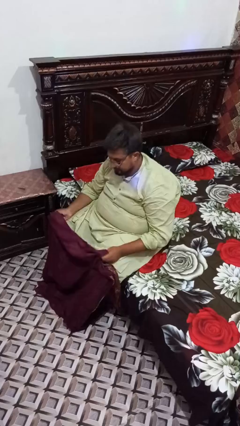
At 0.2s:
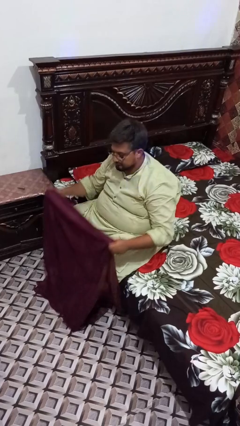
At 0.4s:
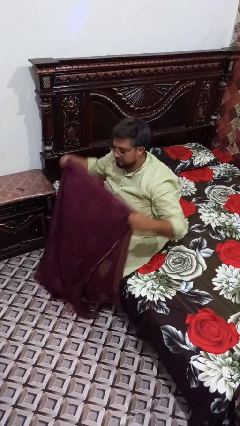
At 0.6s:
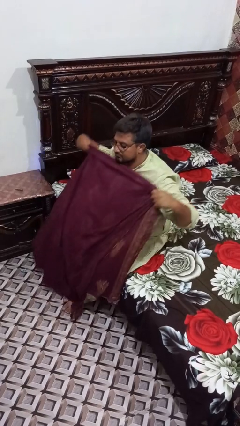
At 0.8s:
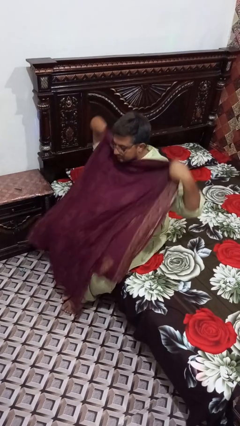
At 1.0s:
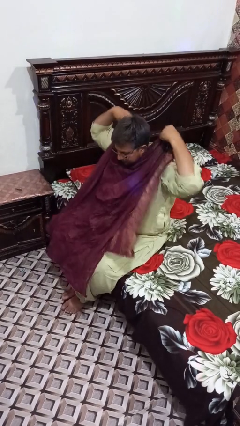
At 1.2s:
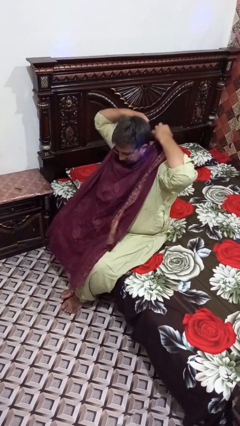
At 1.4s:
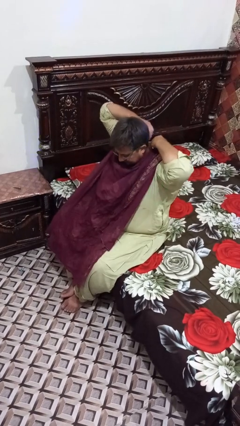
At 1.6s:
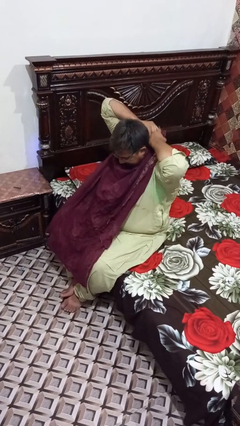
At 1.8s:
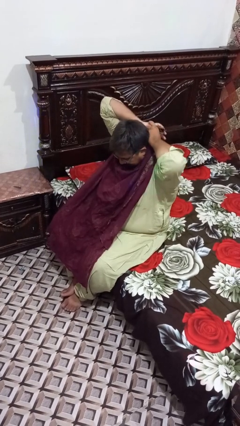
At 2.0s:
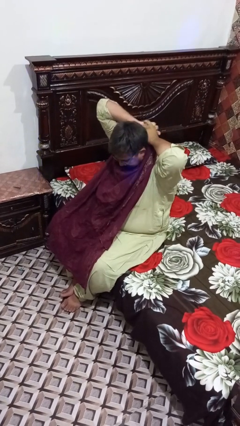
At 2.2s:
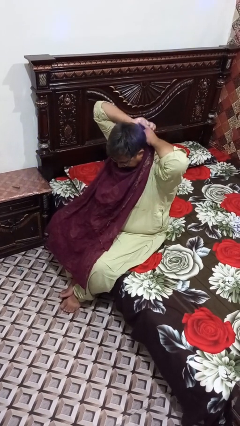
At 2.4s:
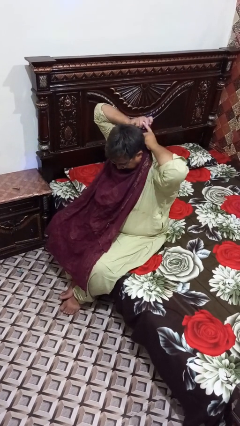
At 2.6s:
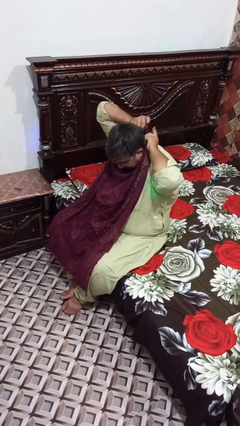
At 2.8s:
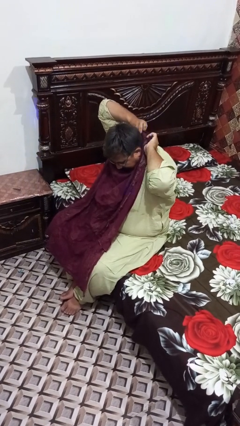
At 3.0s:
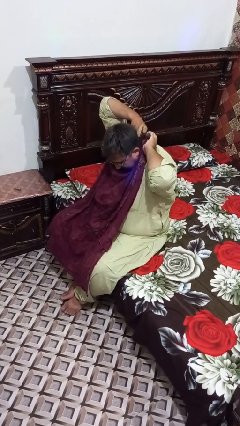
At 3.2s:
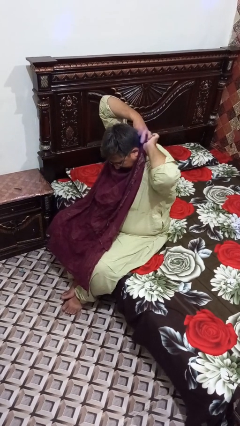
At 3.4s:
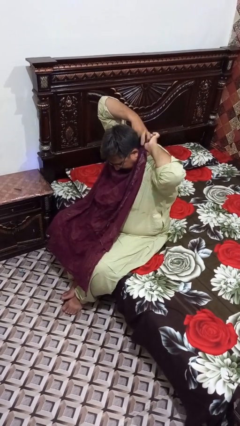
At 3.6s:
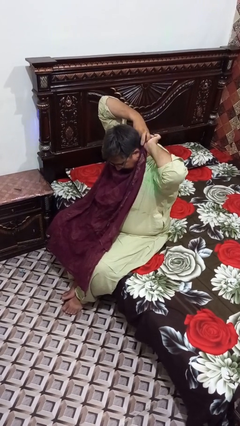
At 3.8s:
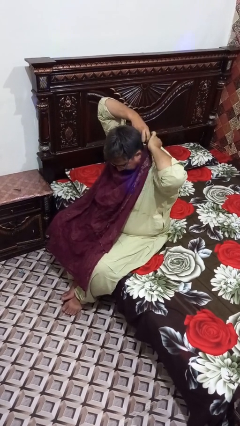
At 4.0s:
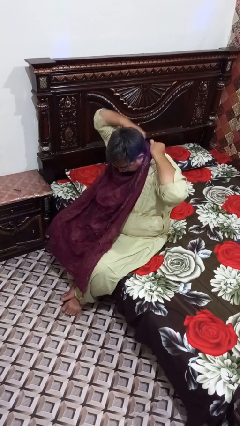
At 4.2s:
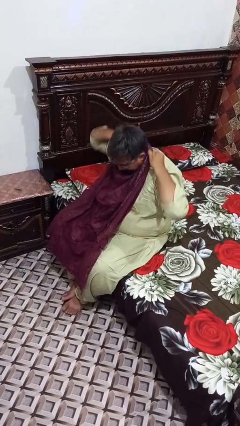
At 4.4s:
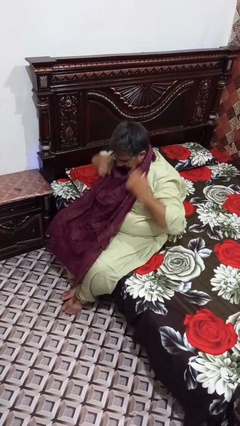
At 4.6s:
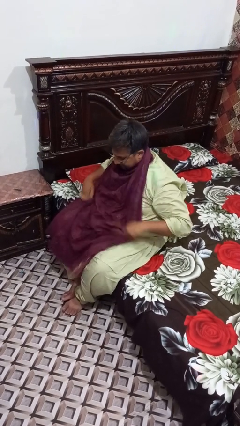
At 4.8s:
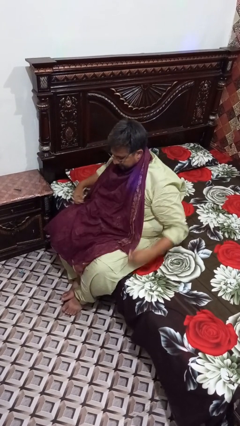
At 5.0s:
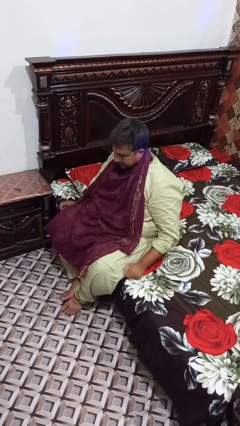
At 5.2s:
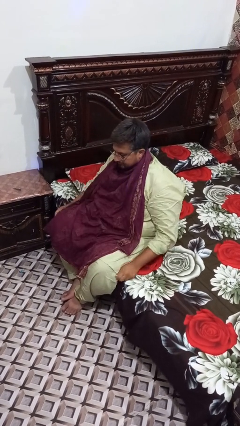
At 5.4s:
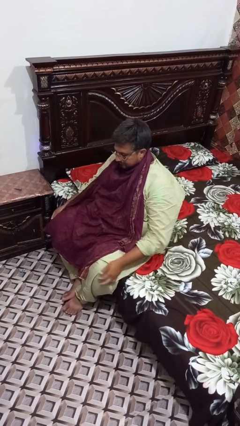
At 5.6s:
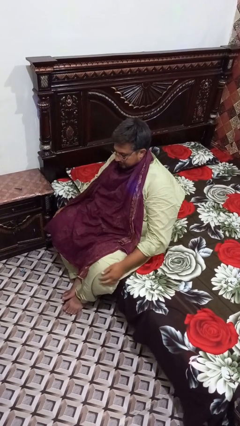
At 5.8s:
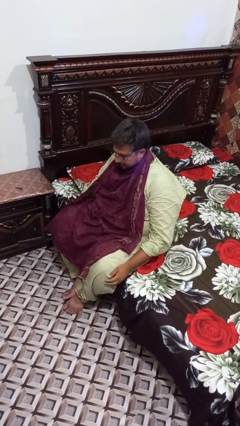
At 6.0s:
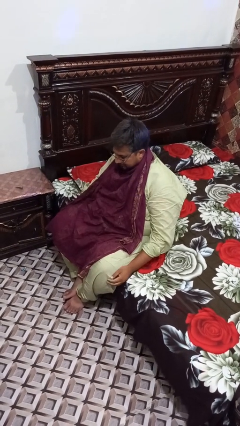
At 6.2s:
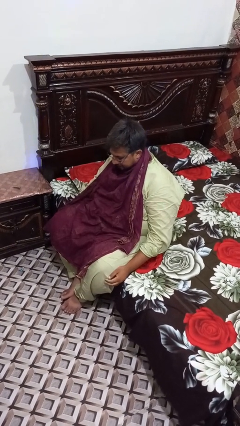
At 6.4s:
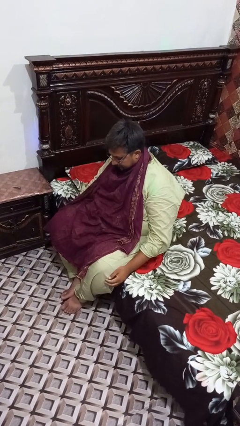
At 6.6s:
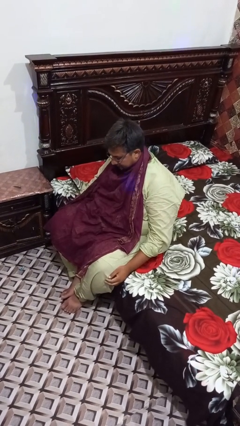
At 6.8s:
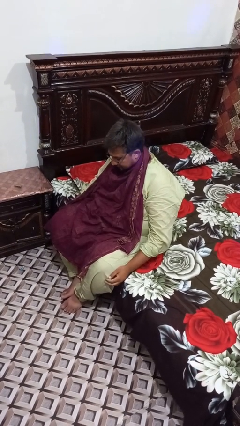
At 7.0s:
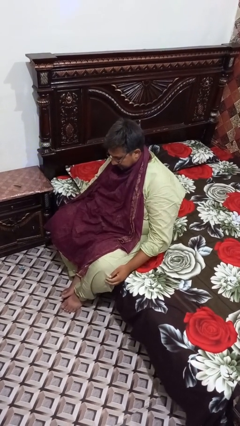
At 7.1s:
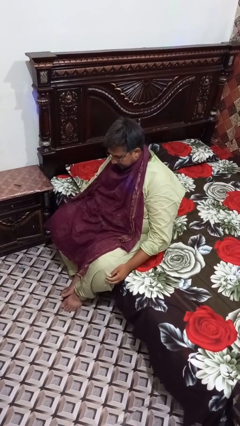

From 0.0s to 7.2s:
person puts on apron

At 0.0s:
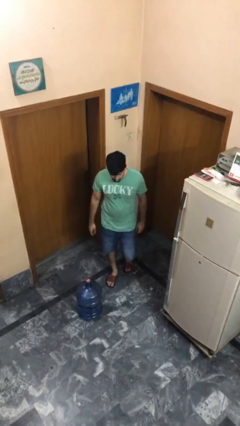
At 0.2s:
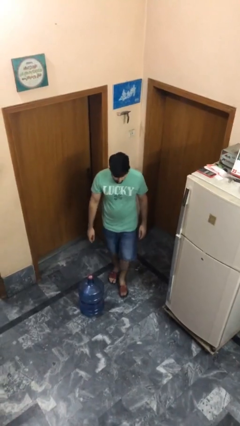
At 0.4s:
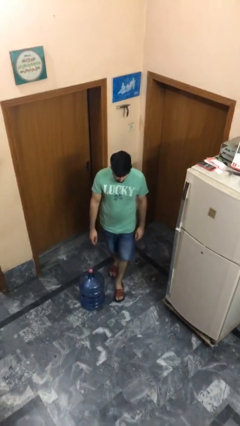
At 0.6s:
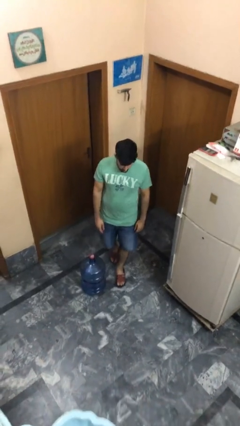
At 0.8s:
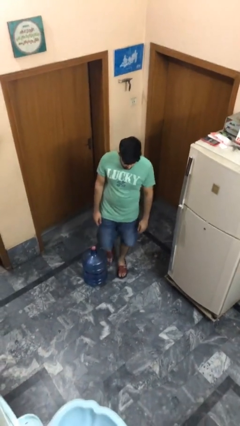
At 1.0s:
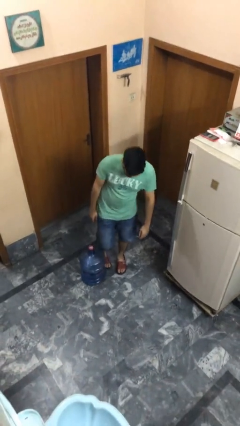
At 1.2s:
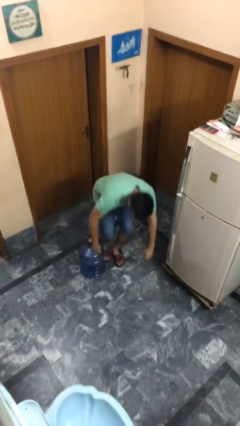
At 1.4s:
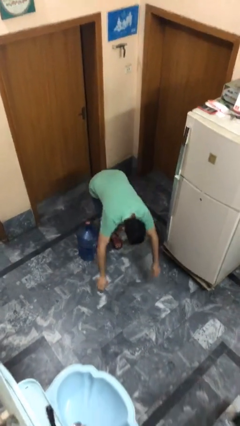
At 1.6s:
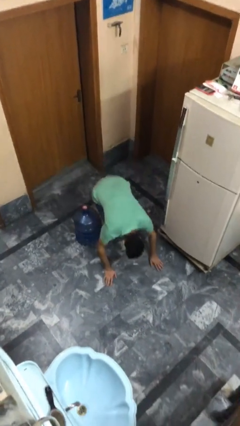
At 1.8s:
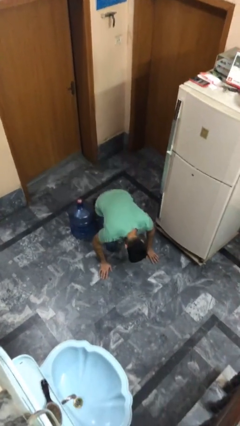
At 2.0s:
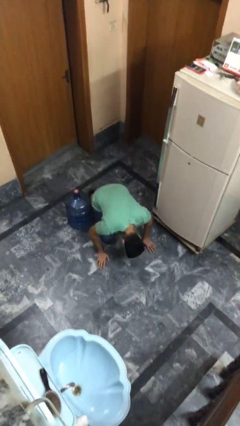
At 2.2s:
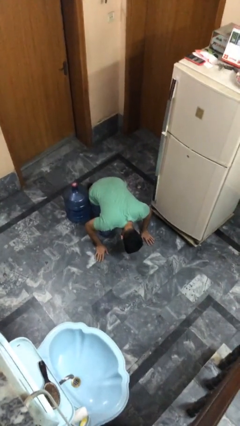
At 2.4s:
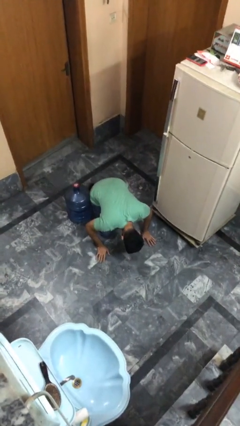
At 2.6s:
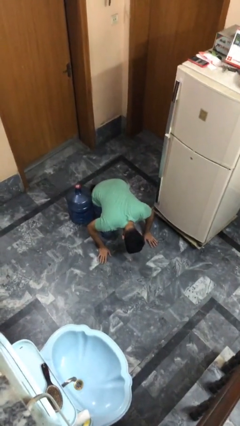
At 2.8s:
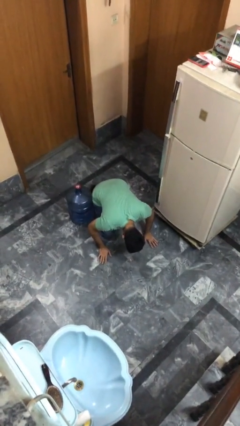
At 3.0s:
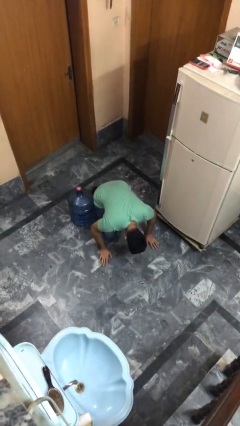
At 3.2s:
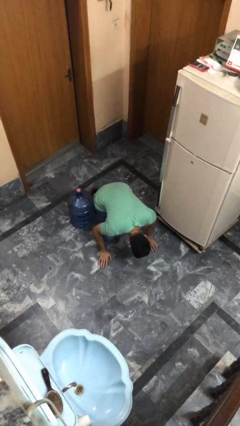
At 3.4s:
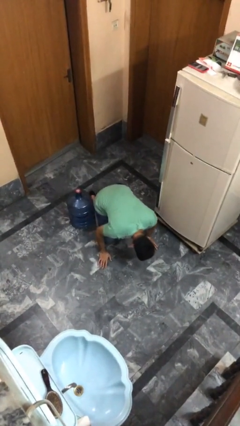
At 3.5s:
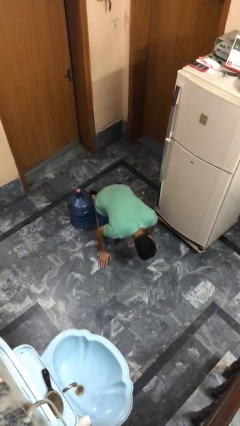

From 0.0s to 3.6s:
person trips on object on floor

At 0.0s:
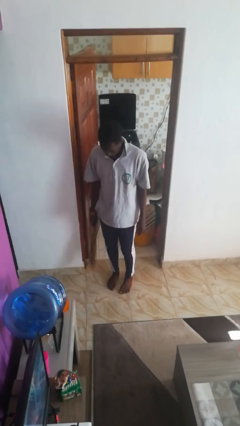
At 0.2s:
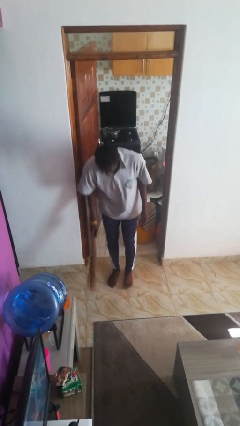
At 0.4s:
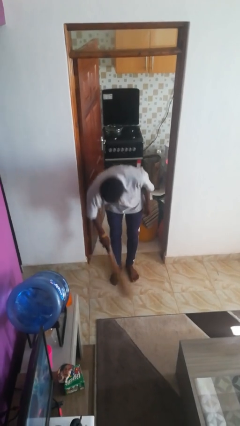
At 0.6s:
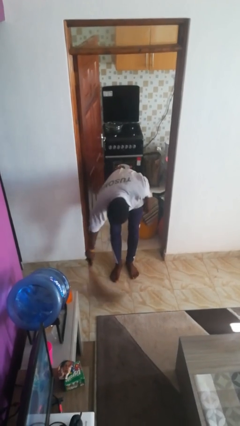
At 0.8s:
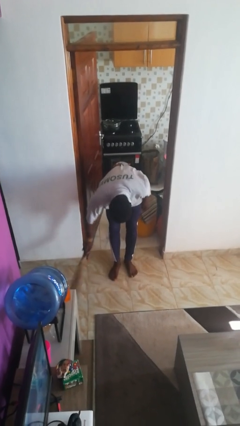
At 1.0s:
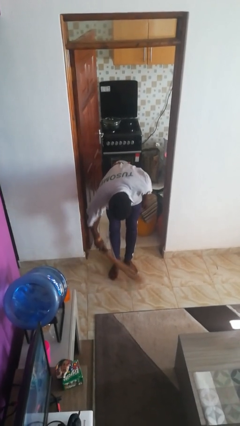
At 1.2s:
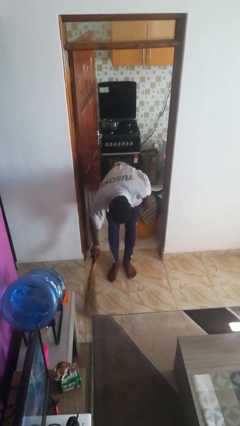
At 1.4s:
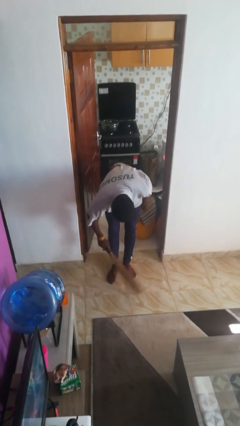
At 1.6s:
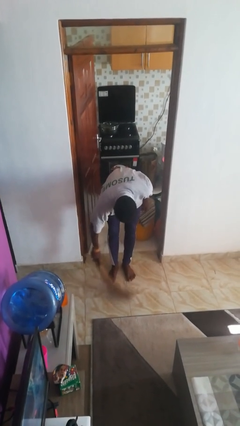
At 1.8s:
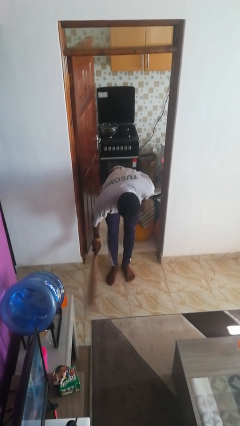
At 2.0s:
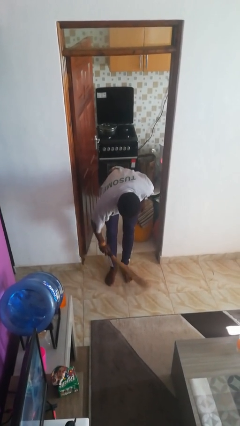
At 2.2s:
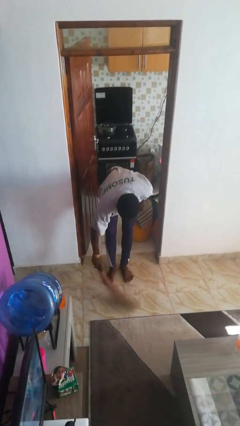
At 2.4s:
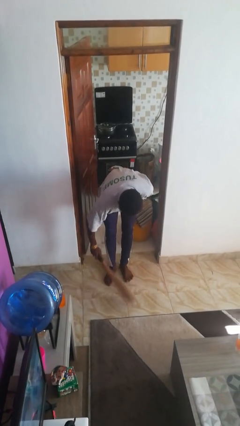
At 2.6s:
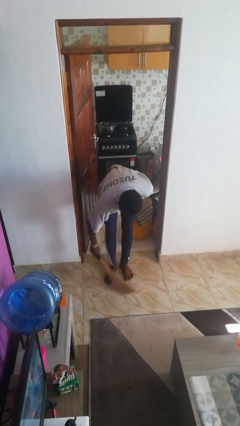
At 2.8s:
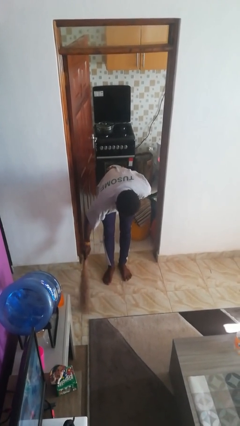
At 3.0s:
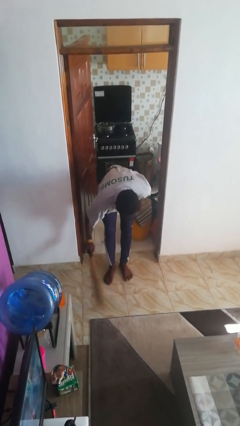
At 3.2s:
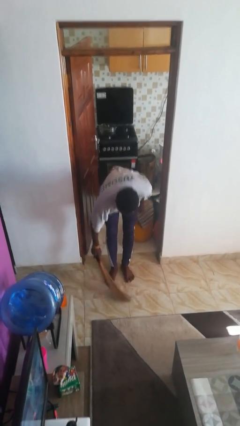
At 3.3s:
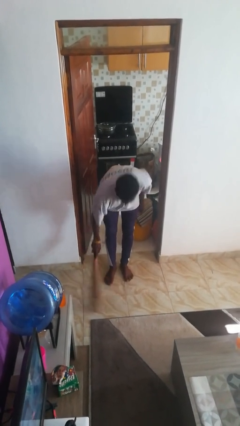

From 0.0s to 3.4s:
person sweeps floor

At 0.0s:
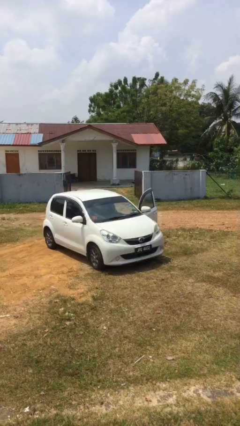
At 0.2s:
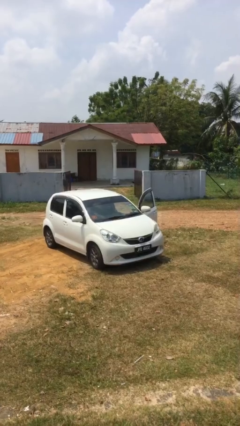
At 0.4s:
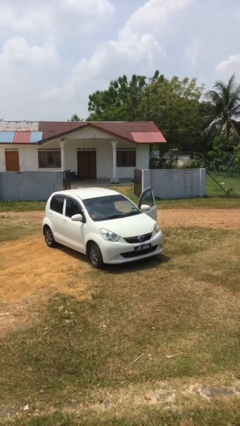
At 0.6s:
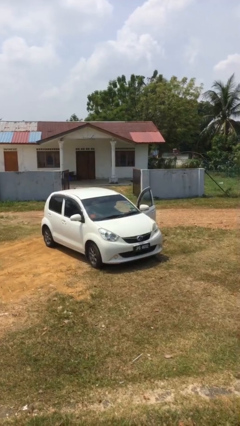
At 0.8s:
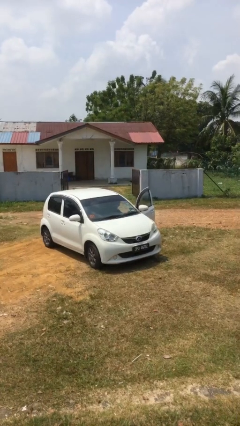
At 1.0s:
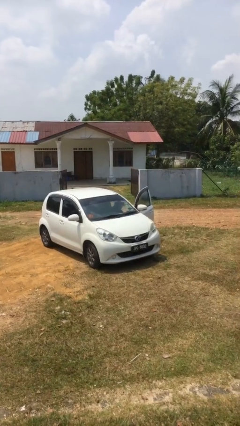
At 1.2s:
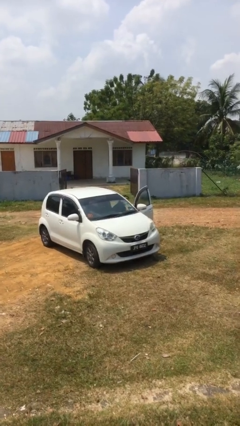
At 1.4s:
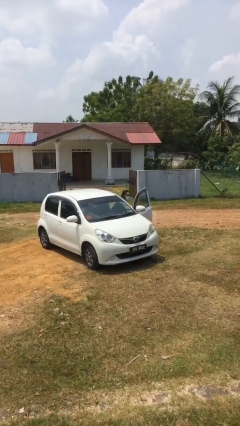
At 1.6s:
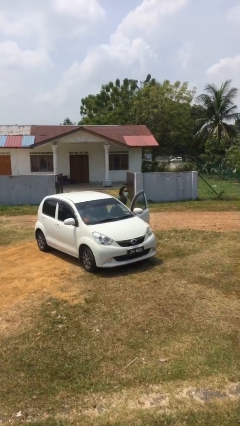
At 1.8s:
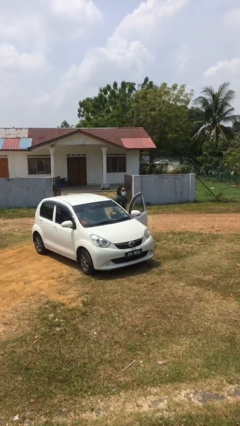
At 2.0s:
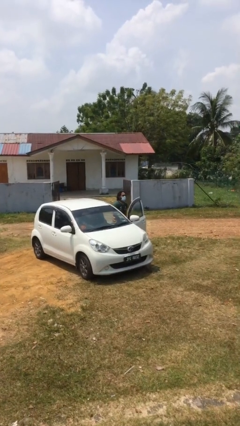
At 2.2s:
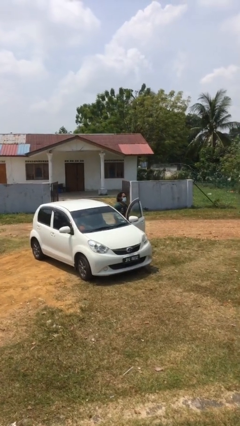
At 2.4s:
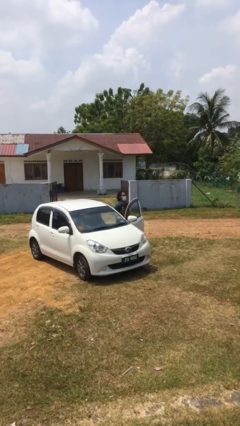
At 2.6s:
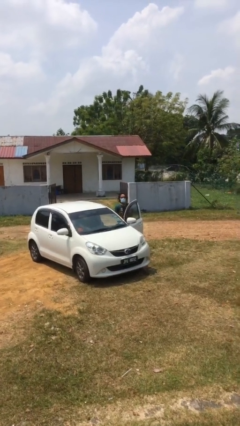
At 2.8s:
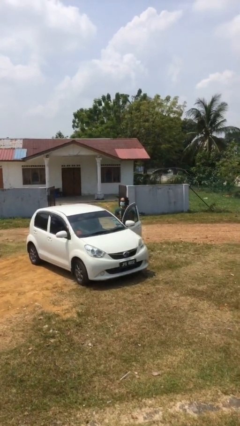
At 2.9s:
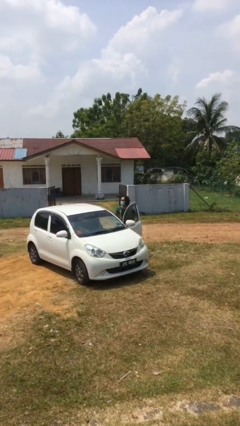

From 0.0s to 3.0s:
person exits car

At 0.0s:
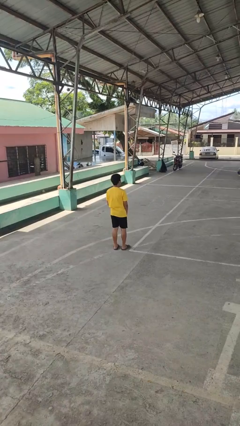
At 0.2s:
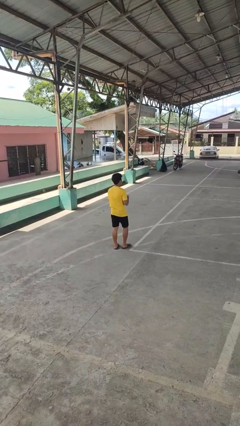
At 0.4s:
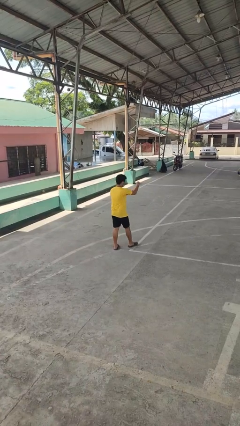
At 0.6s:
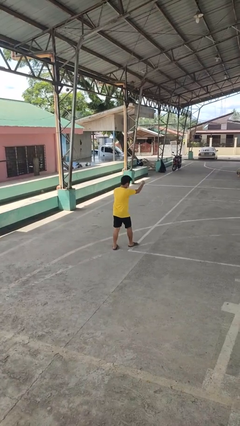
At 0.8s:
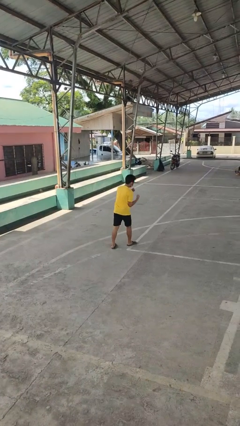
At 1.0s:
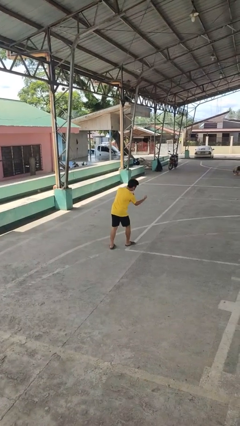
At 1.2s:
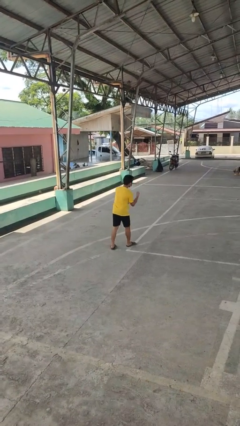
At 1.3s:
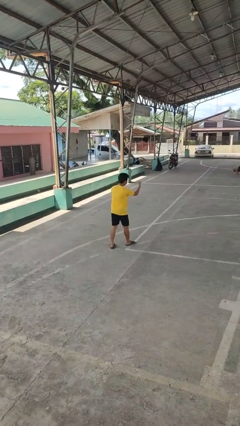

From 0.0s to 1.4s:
person punches
